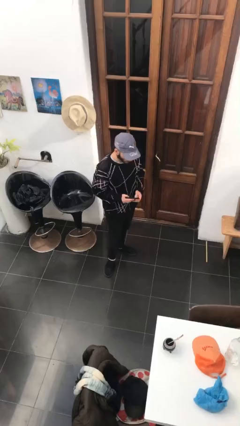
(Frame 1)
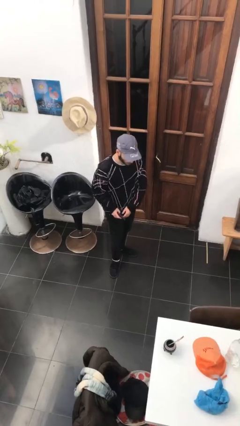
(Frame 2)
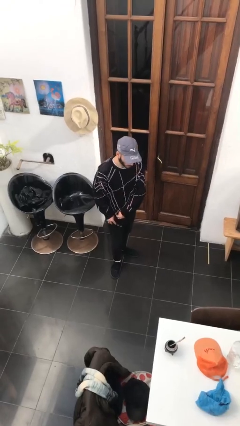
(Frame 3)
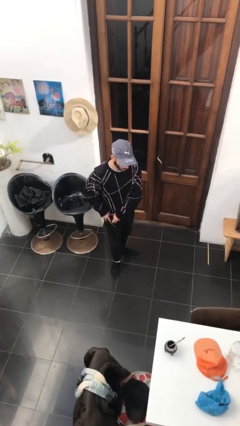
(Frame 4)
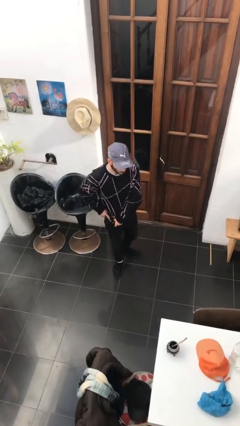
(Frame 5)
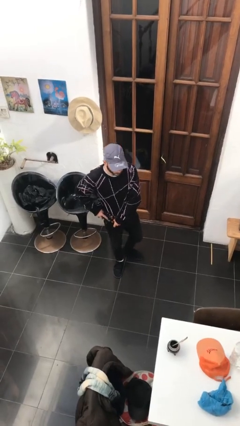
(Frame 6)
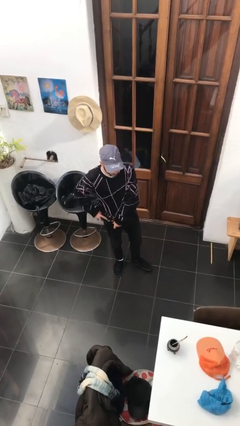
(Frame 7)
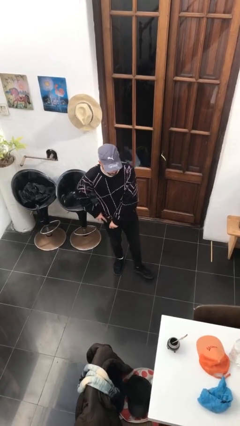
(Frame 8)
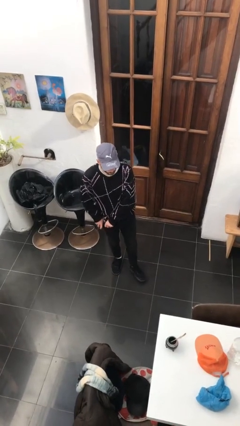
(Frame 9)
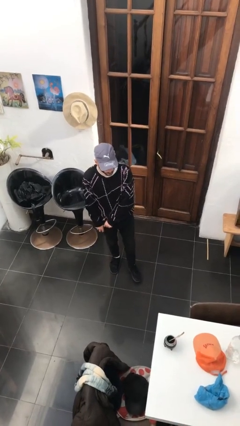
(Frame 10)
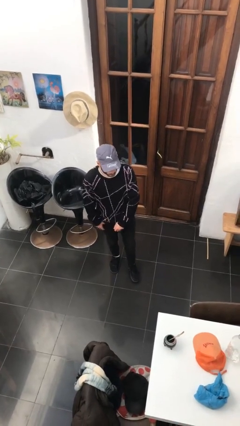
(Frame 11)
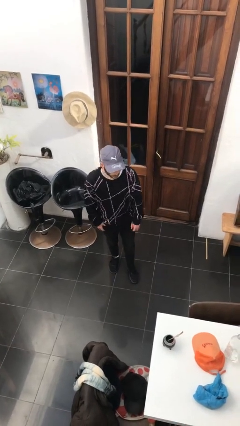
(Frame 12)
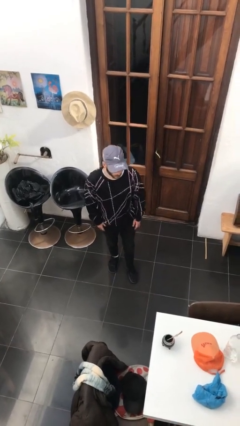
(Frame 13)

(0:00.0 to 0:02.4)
person puts phone into pocket

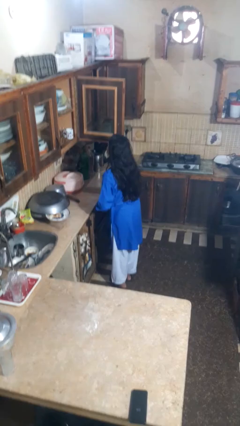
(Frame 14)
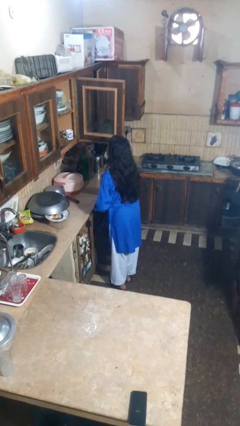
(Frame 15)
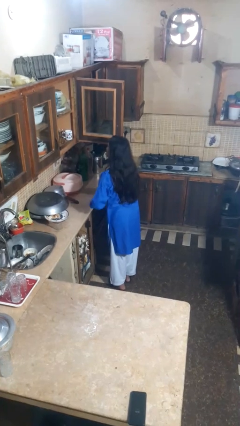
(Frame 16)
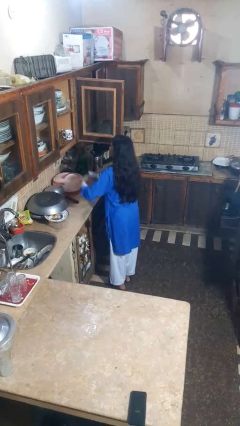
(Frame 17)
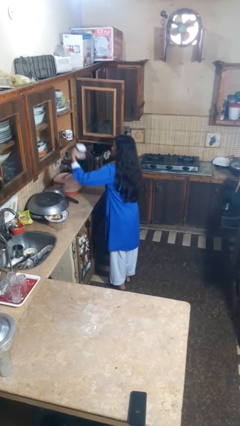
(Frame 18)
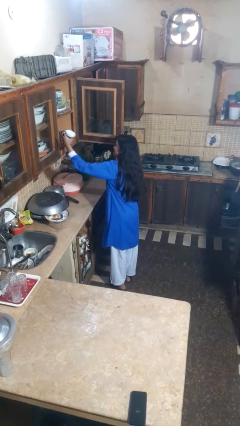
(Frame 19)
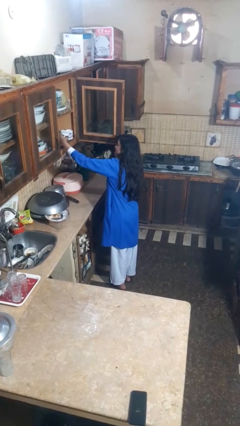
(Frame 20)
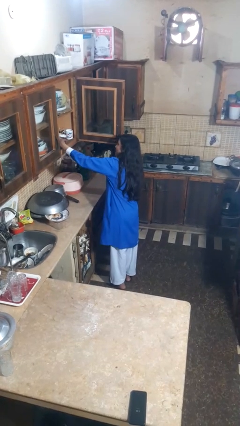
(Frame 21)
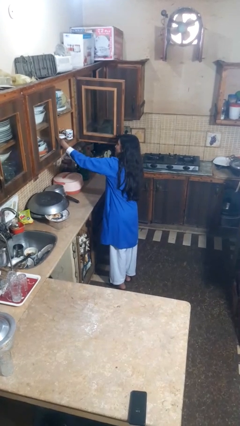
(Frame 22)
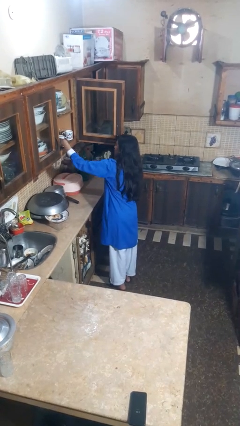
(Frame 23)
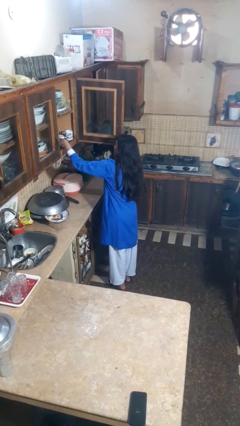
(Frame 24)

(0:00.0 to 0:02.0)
person puts object in cabinet

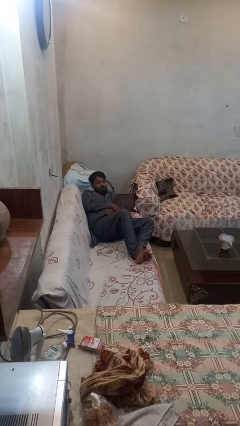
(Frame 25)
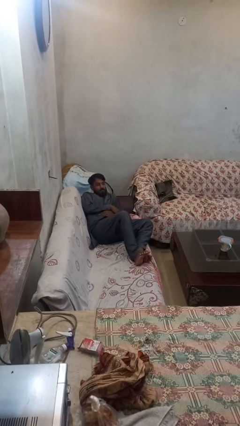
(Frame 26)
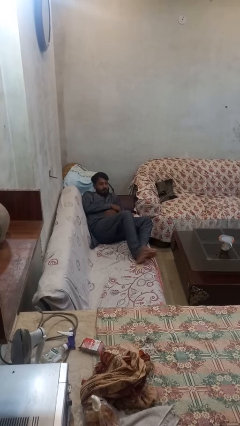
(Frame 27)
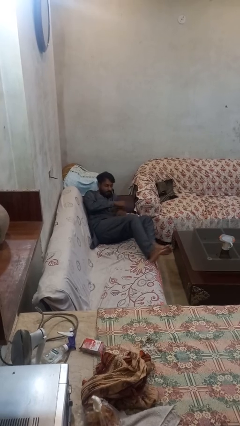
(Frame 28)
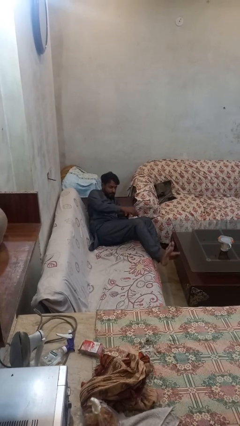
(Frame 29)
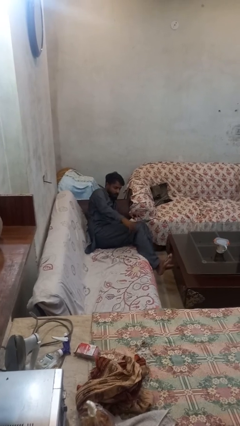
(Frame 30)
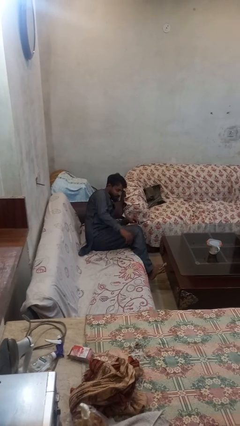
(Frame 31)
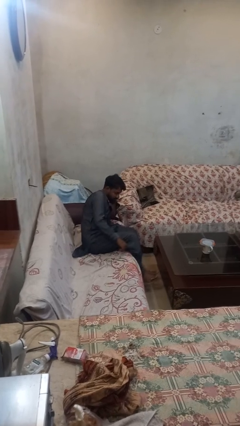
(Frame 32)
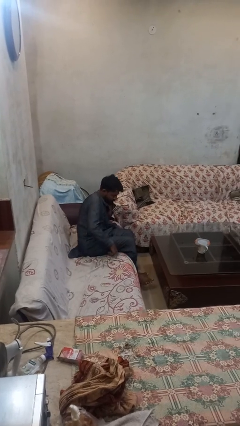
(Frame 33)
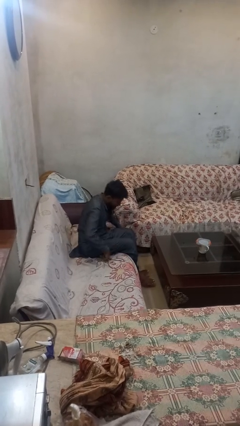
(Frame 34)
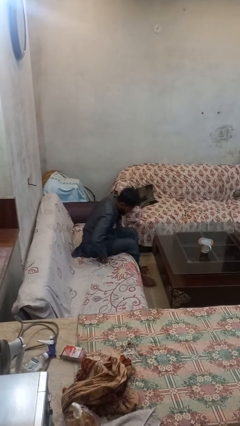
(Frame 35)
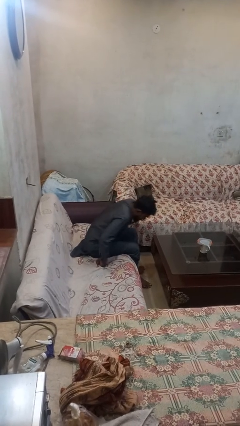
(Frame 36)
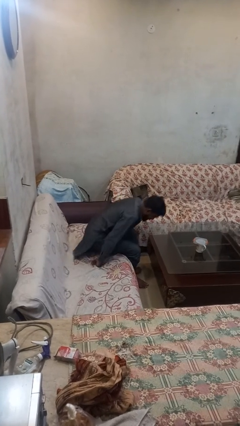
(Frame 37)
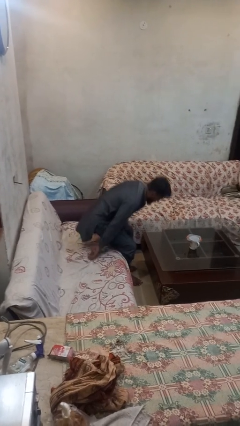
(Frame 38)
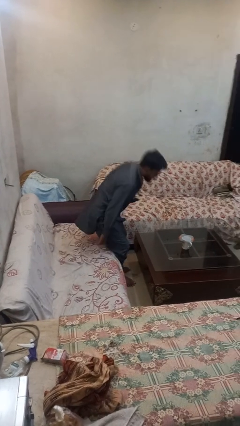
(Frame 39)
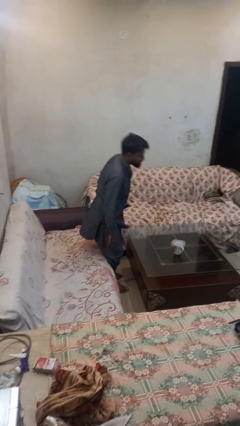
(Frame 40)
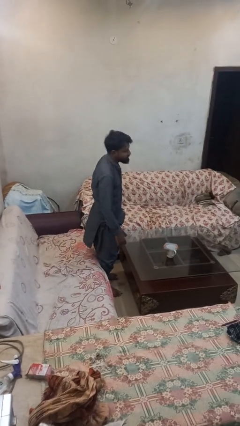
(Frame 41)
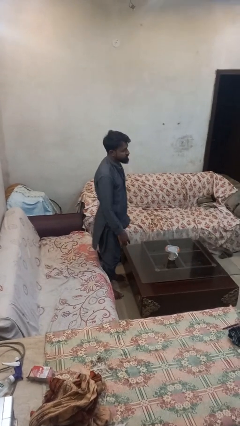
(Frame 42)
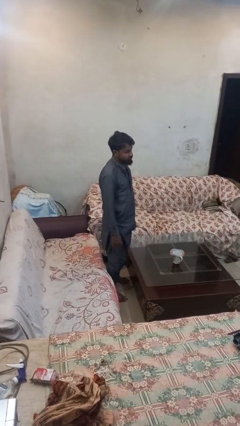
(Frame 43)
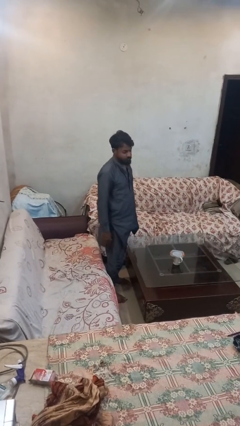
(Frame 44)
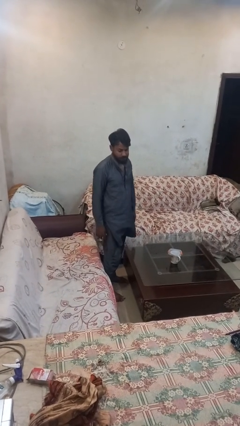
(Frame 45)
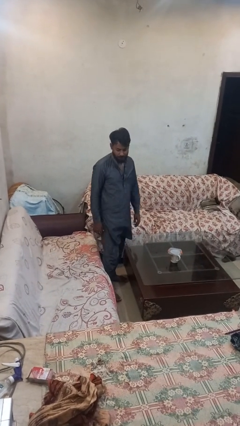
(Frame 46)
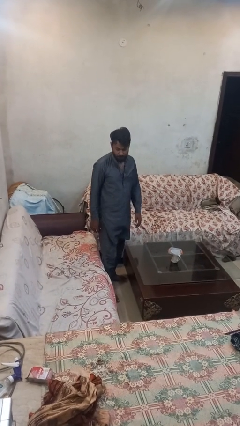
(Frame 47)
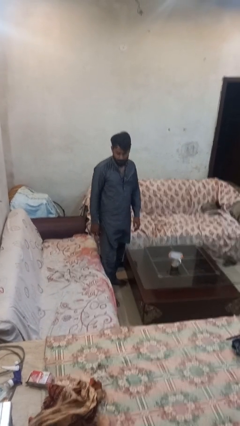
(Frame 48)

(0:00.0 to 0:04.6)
person stands up

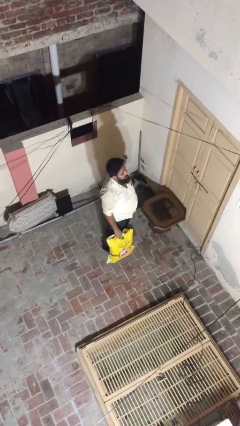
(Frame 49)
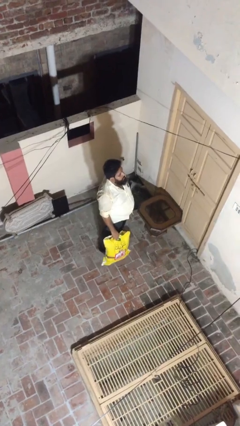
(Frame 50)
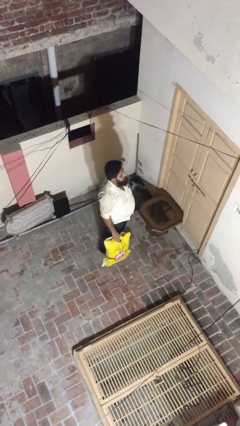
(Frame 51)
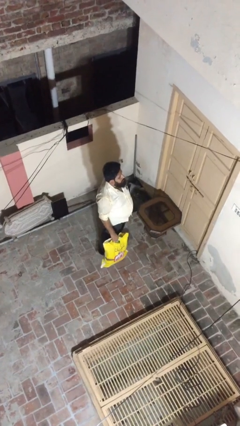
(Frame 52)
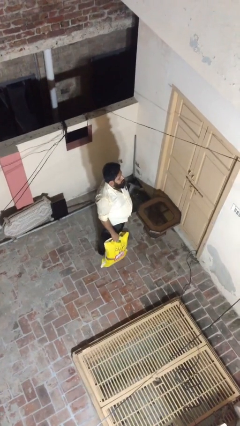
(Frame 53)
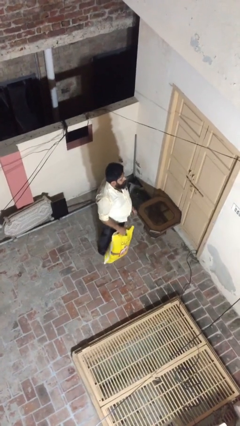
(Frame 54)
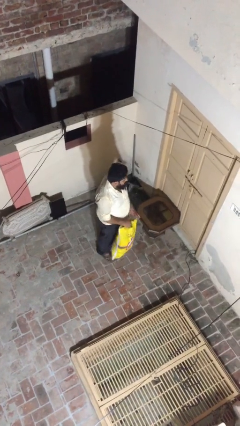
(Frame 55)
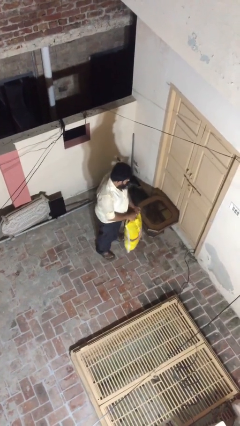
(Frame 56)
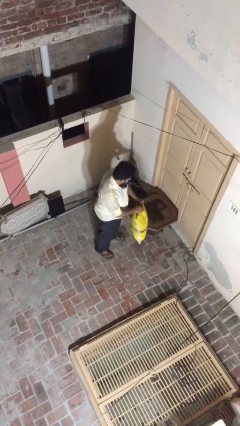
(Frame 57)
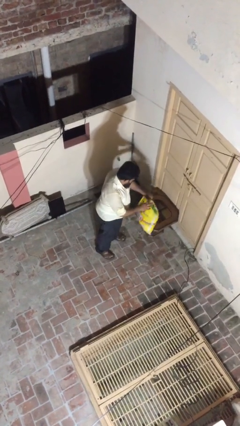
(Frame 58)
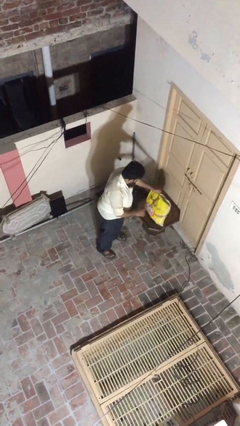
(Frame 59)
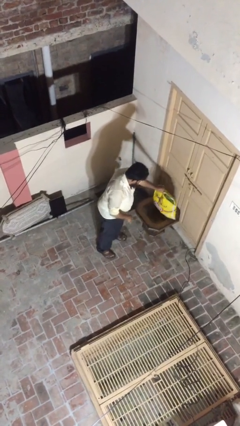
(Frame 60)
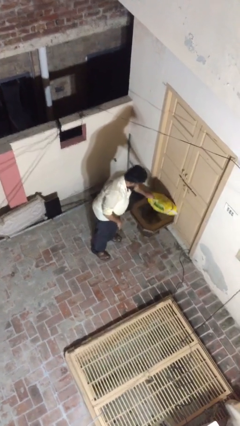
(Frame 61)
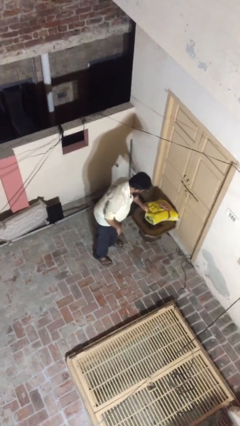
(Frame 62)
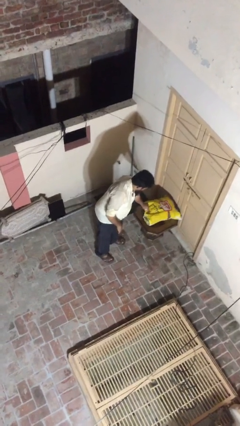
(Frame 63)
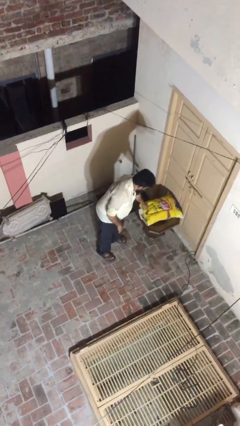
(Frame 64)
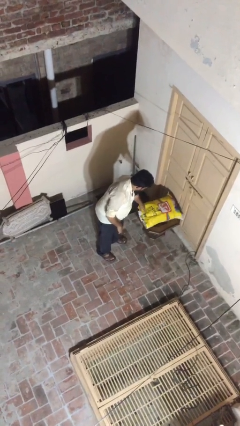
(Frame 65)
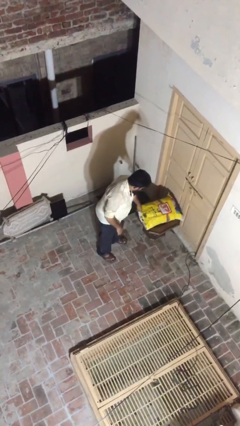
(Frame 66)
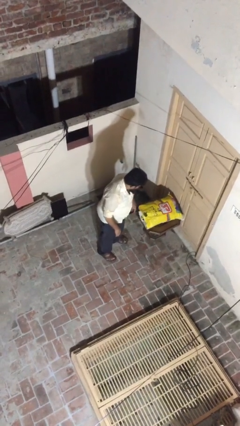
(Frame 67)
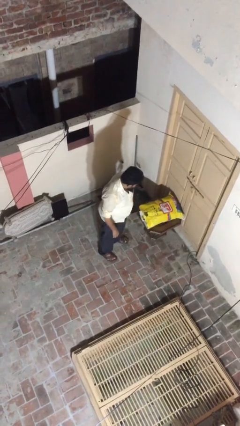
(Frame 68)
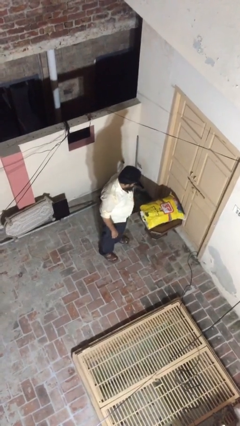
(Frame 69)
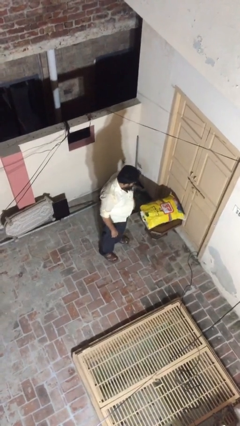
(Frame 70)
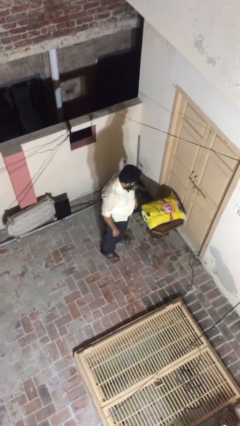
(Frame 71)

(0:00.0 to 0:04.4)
person puts down object on table

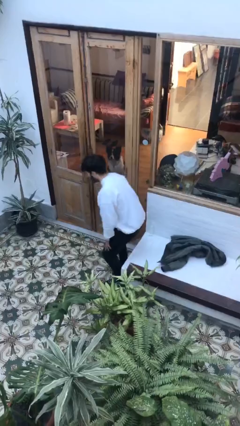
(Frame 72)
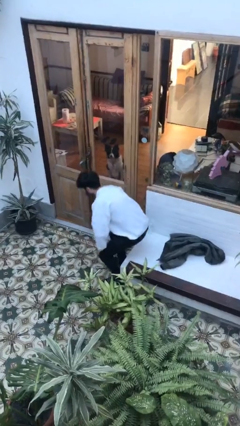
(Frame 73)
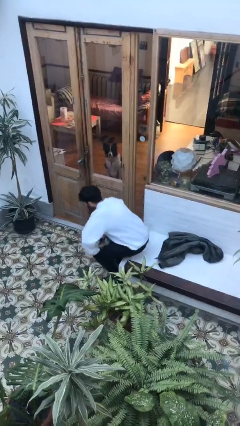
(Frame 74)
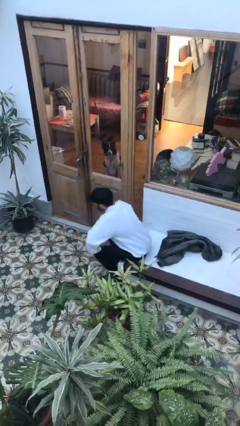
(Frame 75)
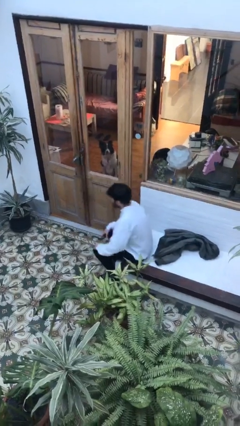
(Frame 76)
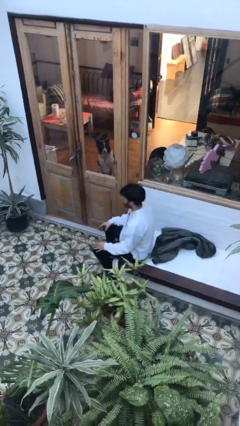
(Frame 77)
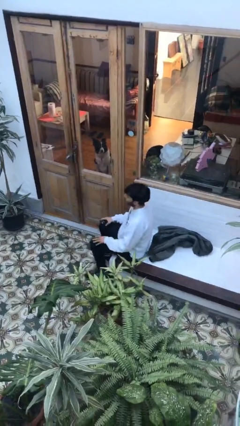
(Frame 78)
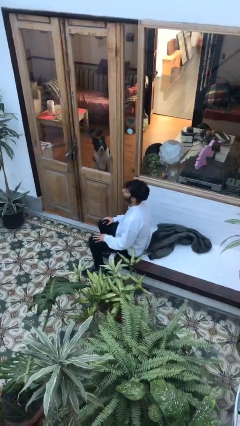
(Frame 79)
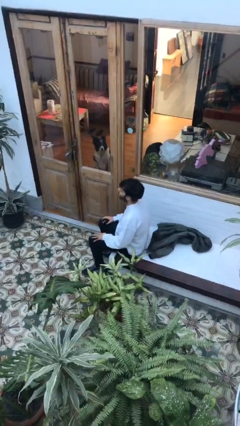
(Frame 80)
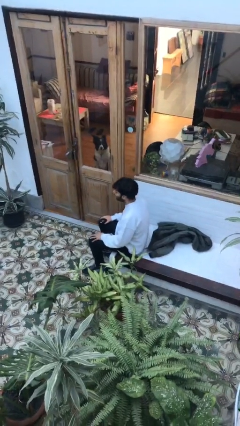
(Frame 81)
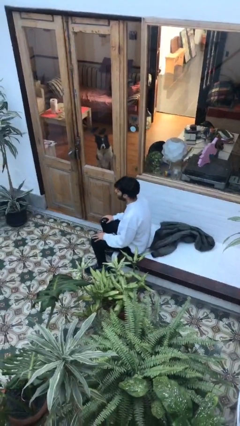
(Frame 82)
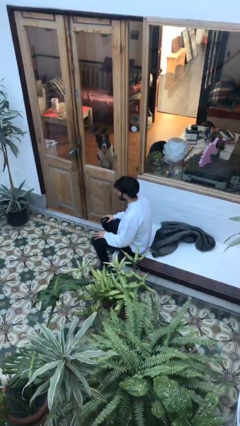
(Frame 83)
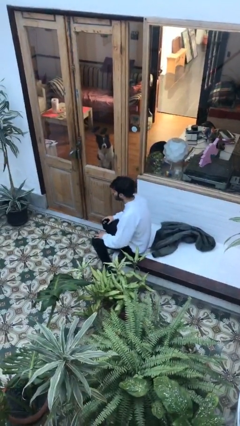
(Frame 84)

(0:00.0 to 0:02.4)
person sits down

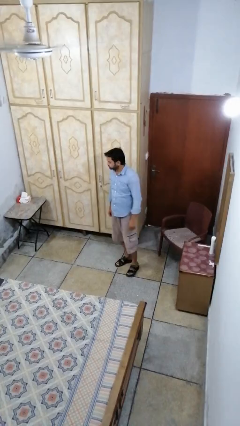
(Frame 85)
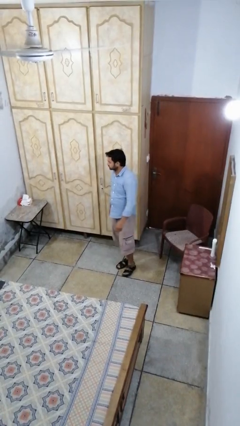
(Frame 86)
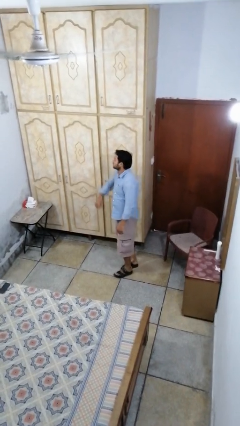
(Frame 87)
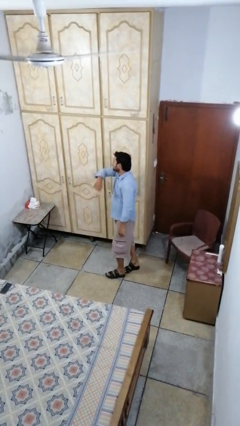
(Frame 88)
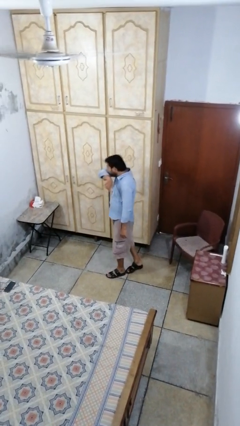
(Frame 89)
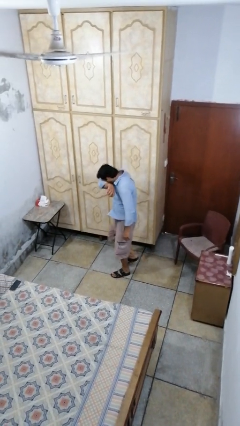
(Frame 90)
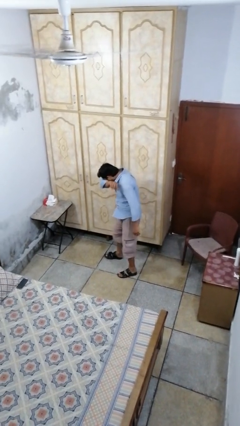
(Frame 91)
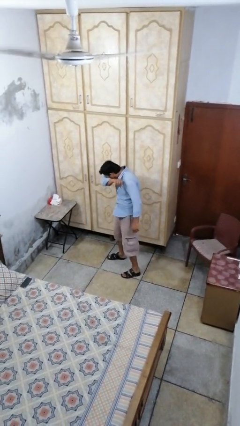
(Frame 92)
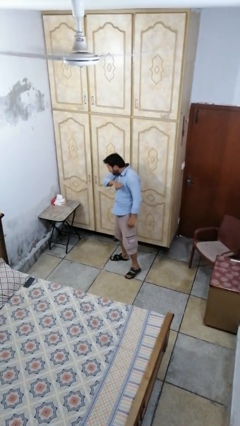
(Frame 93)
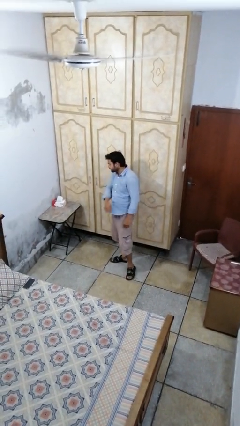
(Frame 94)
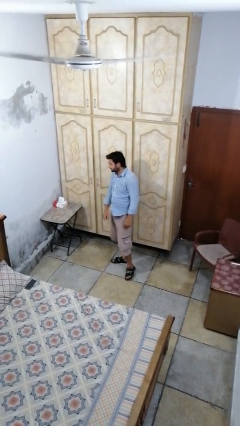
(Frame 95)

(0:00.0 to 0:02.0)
person sneezes into arm
